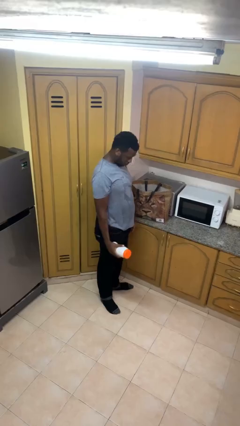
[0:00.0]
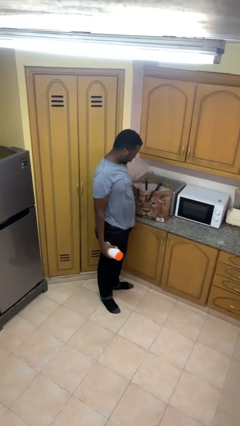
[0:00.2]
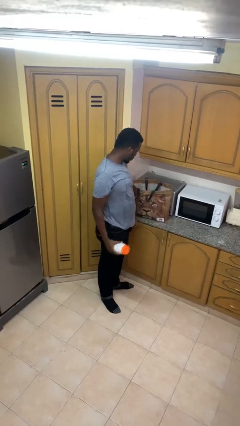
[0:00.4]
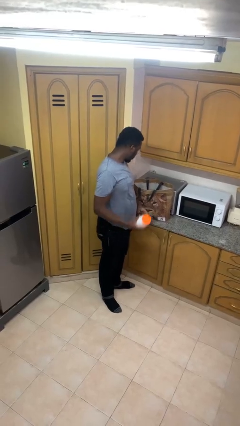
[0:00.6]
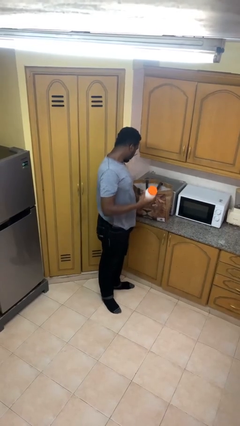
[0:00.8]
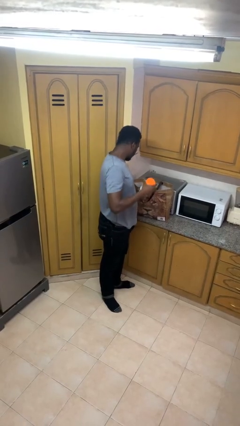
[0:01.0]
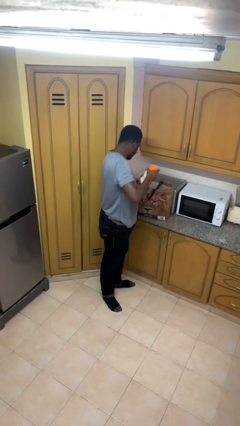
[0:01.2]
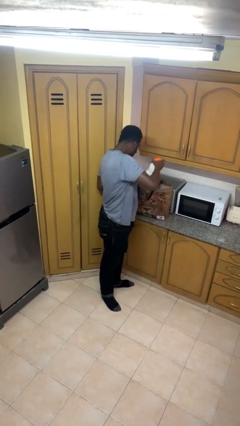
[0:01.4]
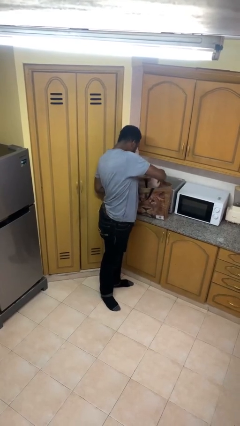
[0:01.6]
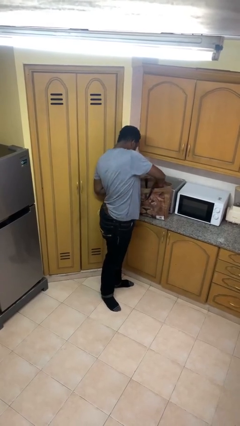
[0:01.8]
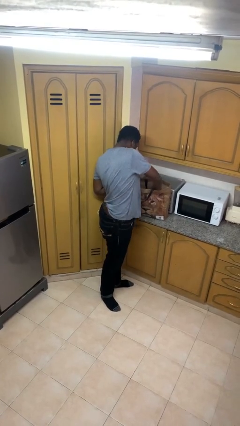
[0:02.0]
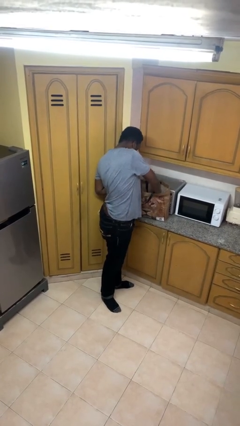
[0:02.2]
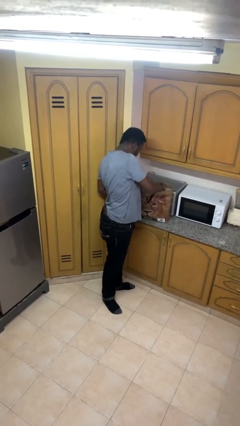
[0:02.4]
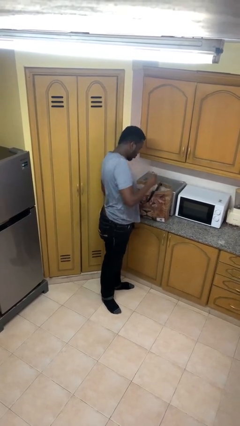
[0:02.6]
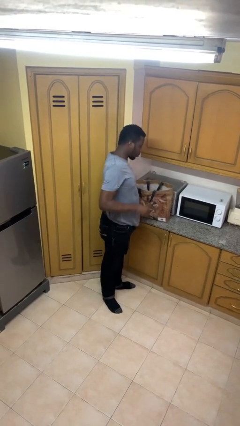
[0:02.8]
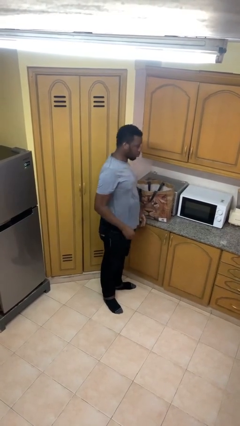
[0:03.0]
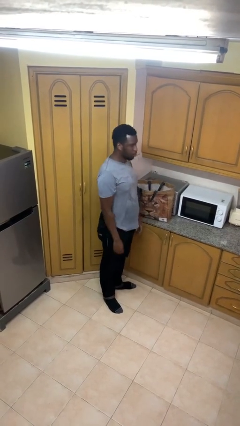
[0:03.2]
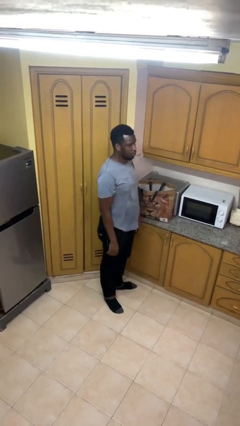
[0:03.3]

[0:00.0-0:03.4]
person puts object into bag

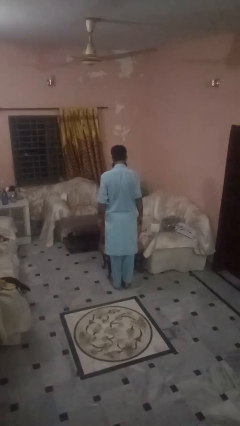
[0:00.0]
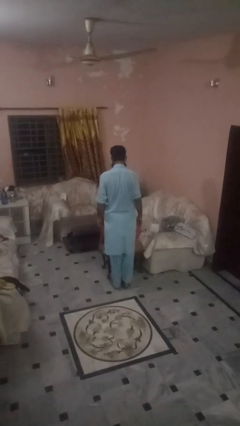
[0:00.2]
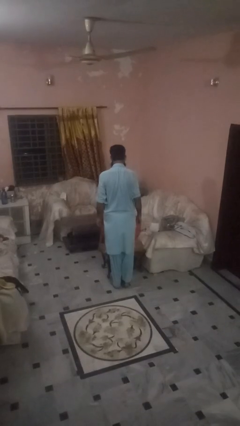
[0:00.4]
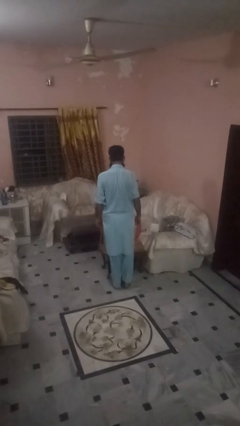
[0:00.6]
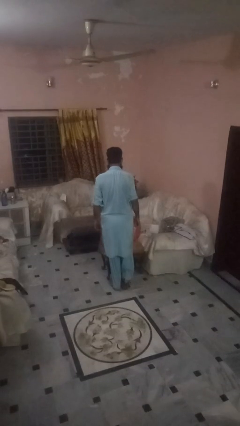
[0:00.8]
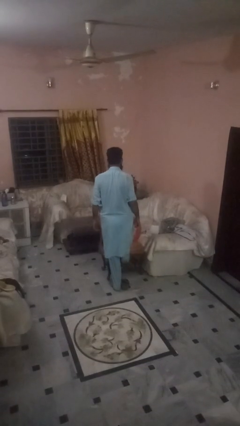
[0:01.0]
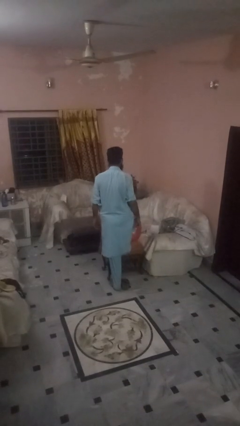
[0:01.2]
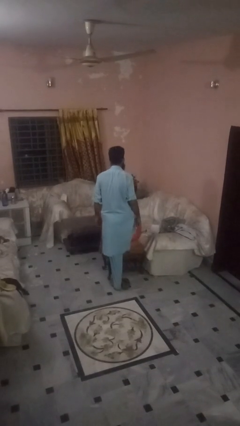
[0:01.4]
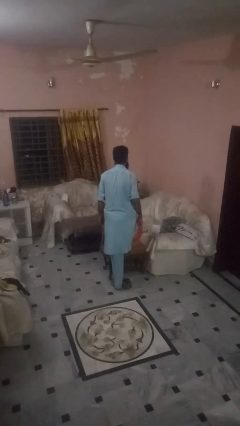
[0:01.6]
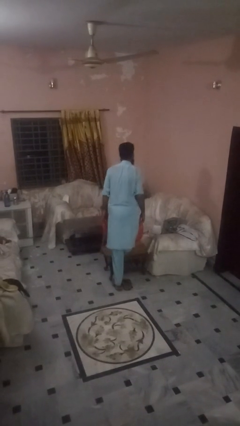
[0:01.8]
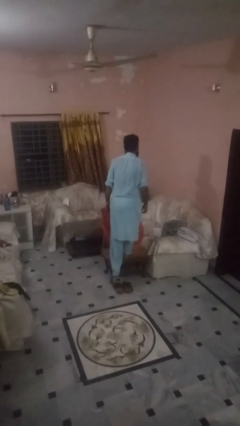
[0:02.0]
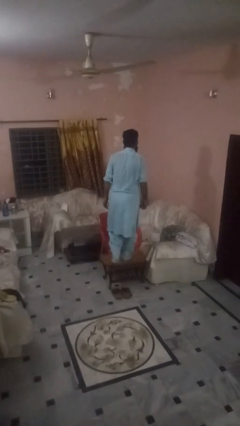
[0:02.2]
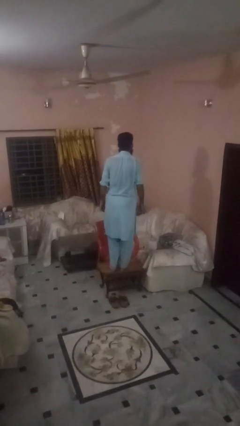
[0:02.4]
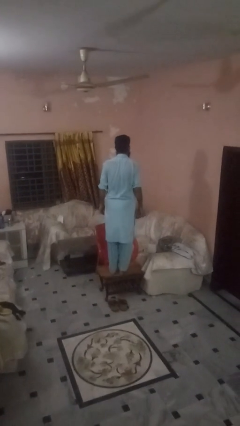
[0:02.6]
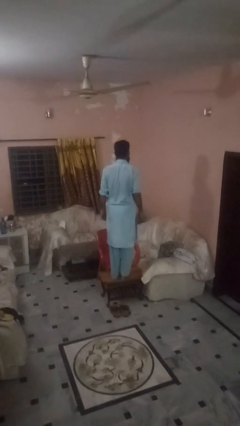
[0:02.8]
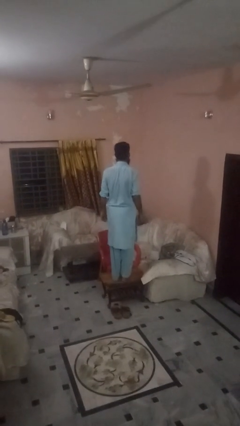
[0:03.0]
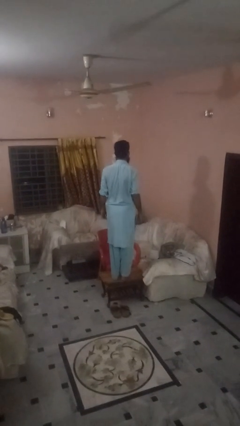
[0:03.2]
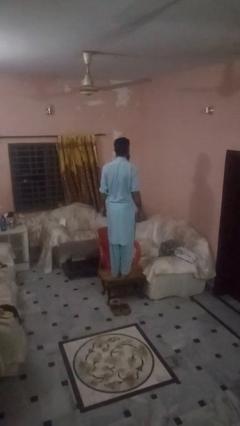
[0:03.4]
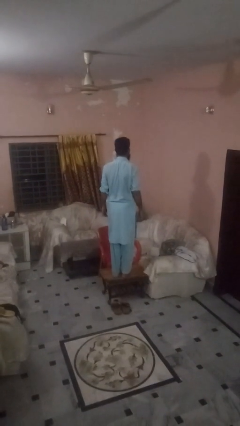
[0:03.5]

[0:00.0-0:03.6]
person climbs on table

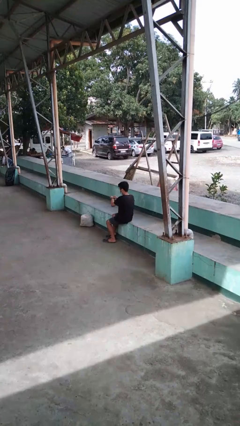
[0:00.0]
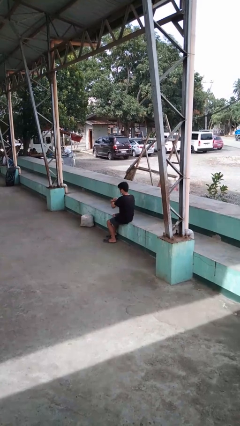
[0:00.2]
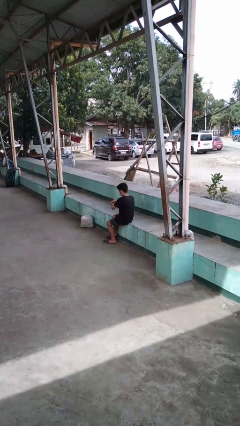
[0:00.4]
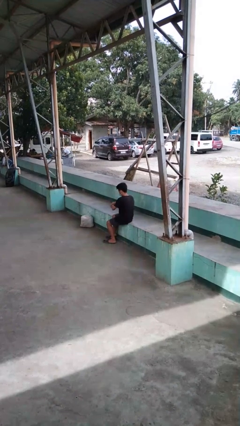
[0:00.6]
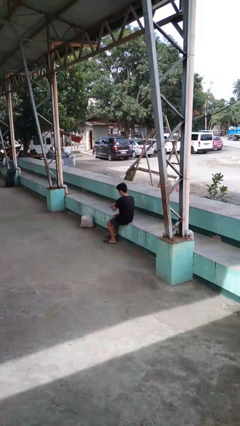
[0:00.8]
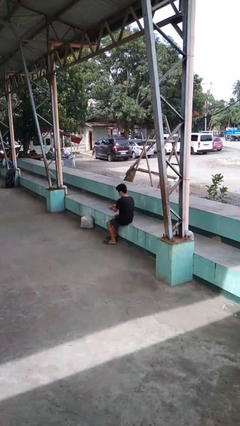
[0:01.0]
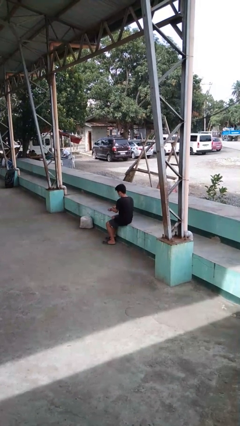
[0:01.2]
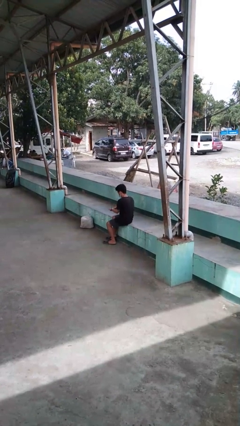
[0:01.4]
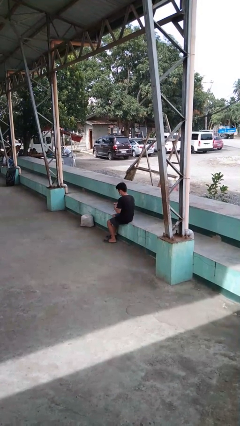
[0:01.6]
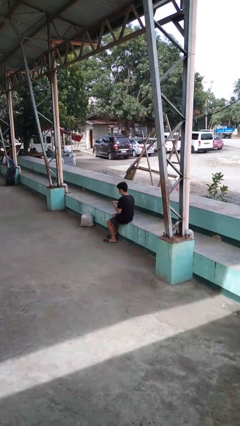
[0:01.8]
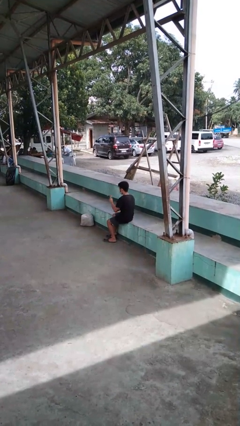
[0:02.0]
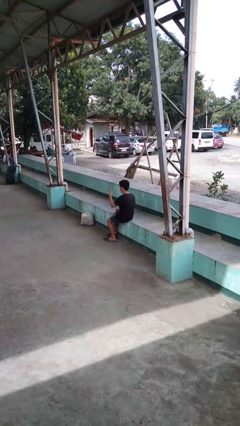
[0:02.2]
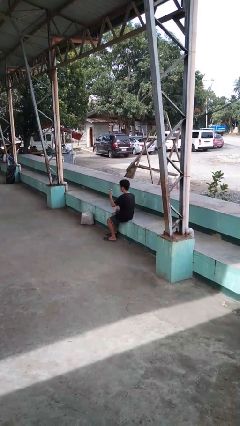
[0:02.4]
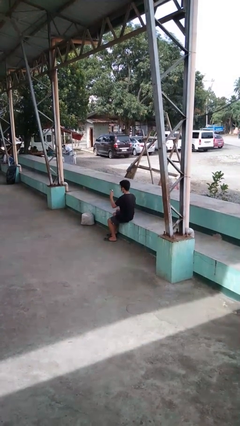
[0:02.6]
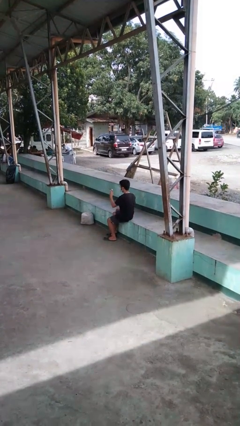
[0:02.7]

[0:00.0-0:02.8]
person takes off wristwatch

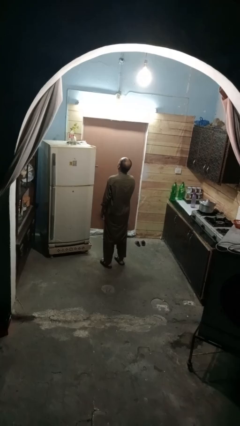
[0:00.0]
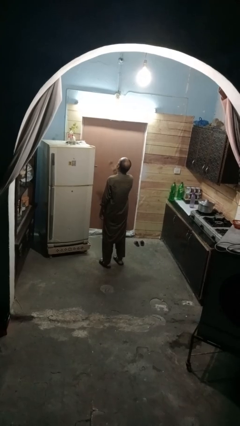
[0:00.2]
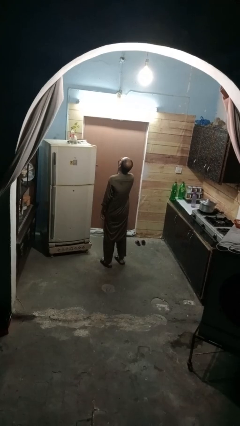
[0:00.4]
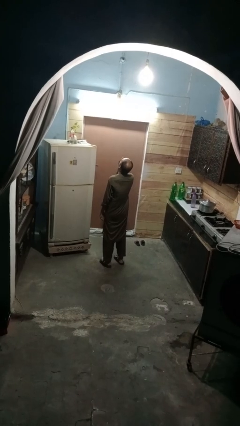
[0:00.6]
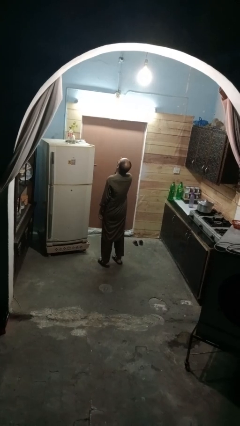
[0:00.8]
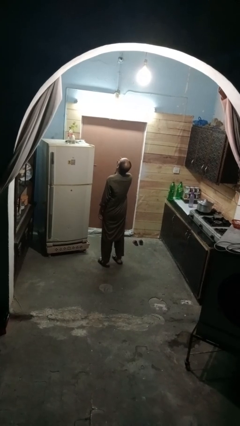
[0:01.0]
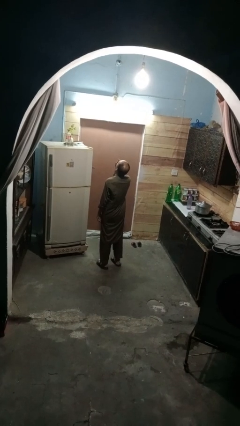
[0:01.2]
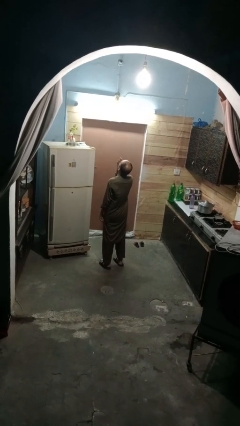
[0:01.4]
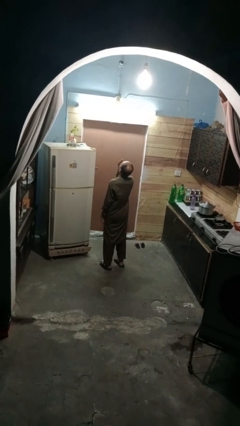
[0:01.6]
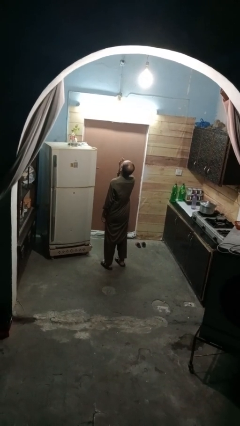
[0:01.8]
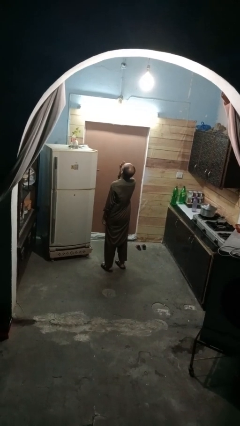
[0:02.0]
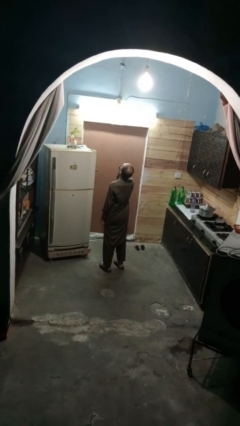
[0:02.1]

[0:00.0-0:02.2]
person yawns

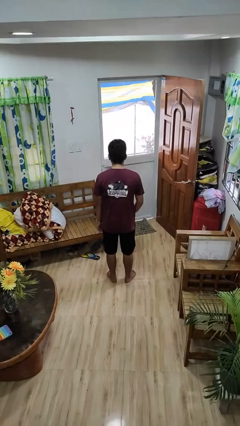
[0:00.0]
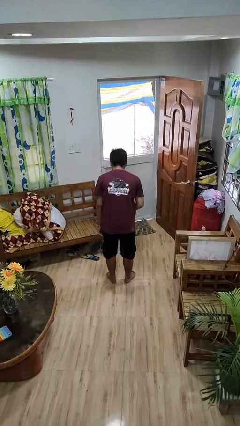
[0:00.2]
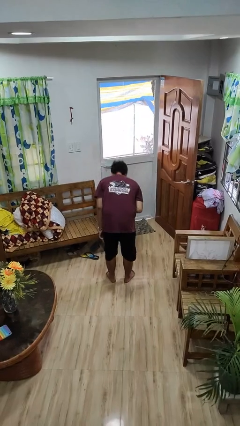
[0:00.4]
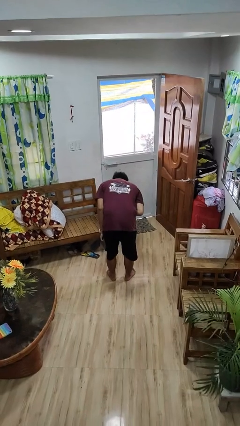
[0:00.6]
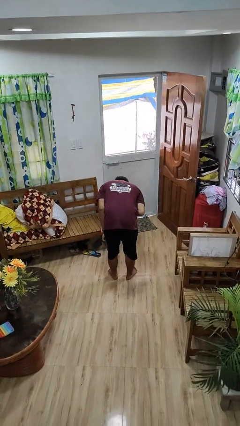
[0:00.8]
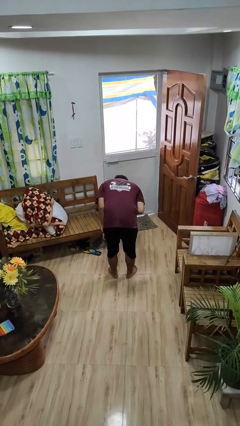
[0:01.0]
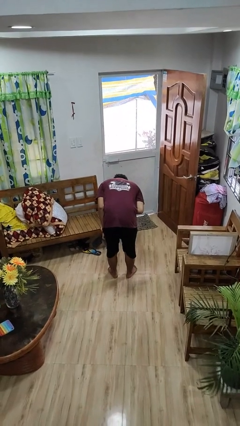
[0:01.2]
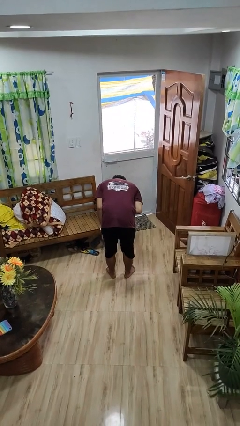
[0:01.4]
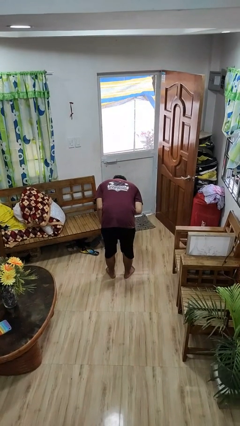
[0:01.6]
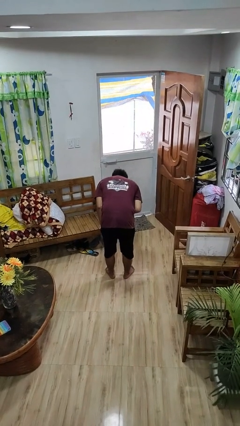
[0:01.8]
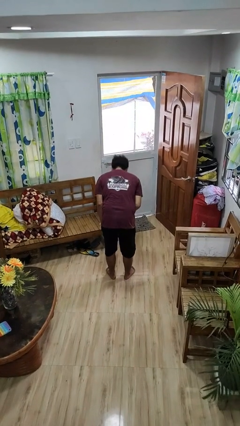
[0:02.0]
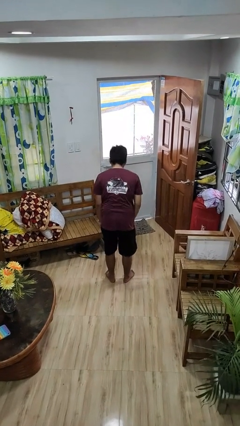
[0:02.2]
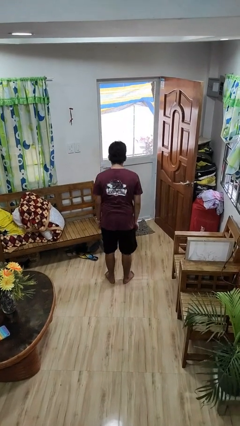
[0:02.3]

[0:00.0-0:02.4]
person bows

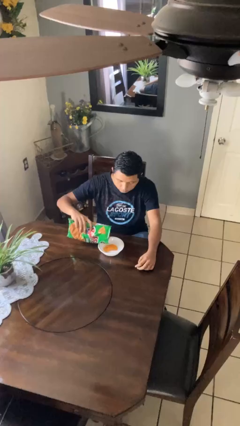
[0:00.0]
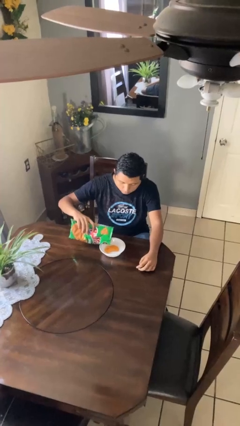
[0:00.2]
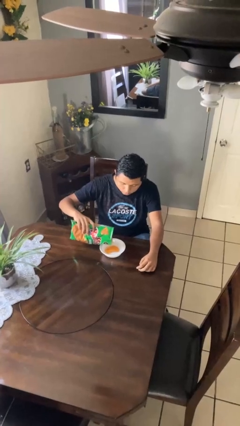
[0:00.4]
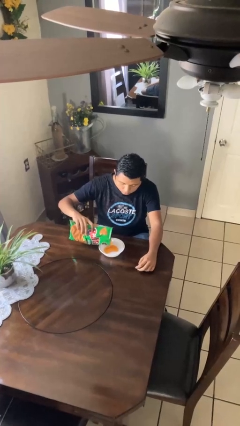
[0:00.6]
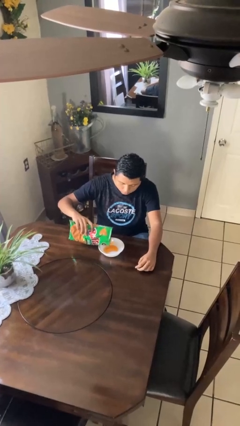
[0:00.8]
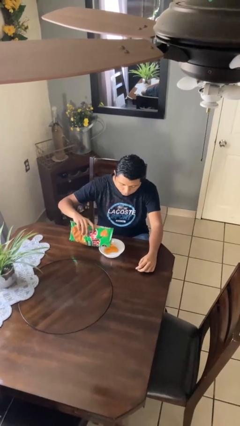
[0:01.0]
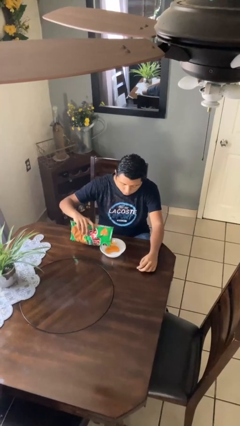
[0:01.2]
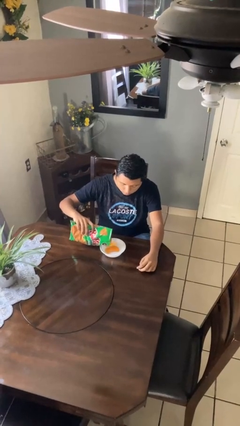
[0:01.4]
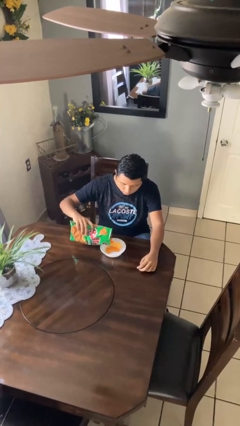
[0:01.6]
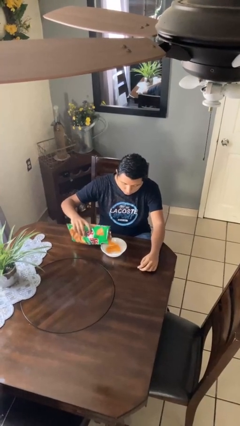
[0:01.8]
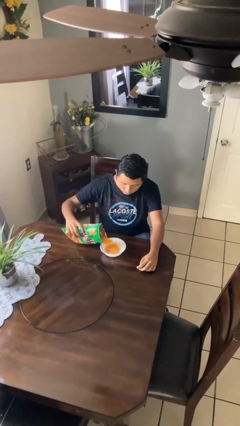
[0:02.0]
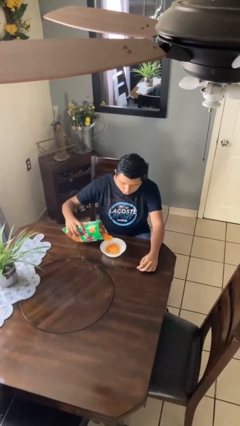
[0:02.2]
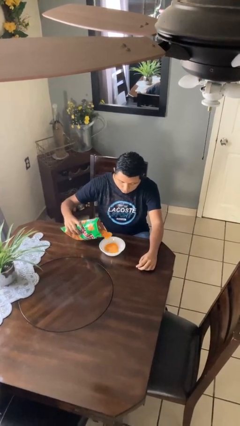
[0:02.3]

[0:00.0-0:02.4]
person pours into bowl
